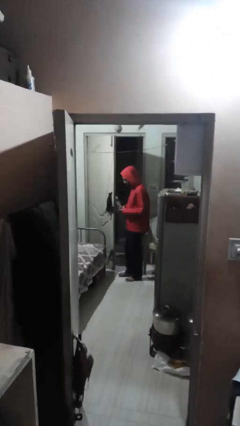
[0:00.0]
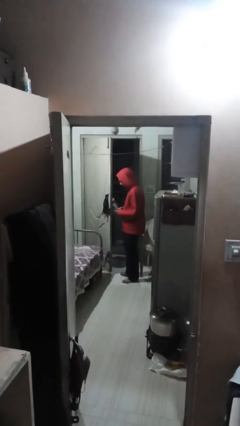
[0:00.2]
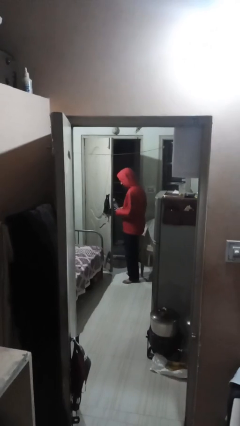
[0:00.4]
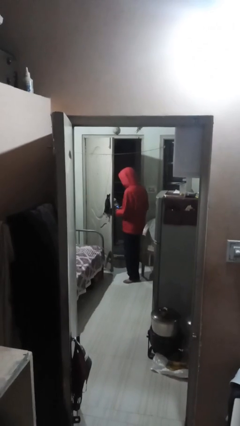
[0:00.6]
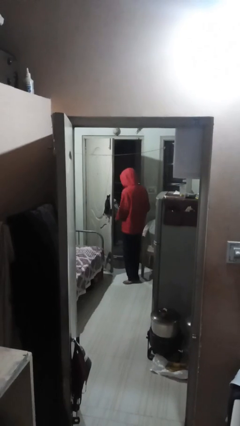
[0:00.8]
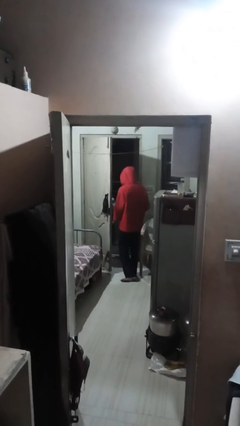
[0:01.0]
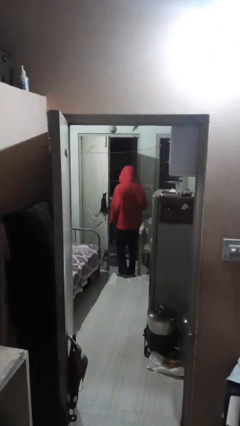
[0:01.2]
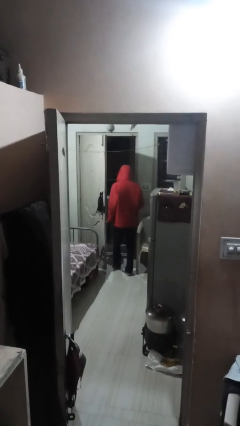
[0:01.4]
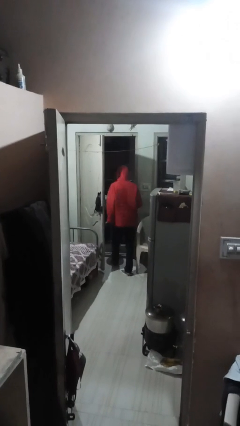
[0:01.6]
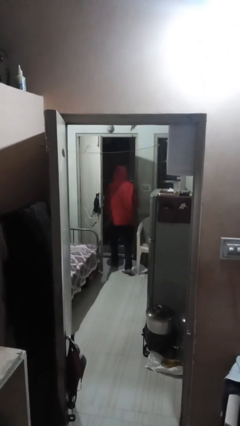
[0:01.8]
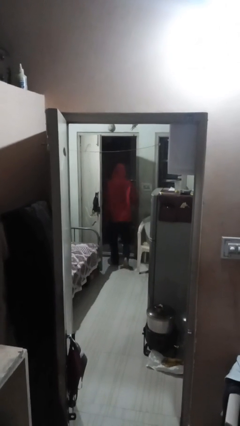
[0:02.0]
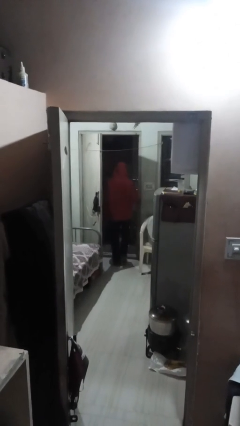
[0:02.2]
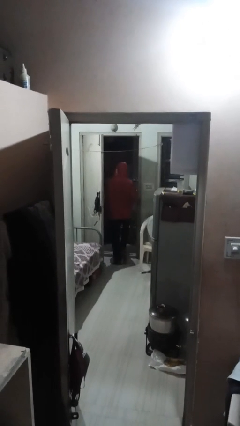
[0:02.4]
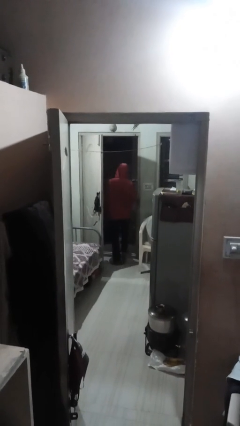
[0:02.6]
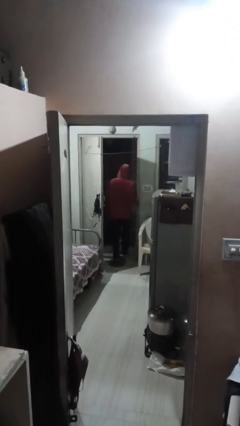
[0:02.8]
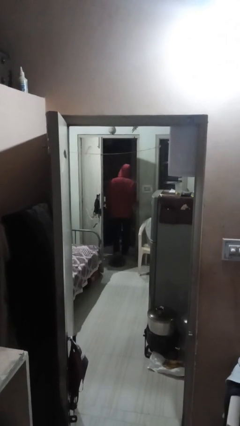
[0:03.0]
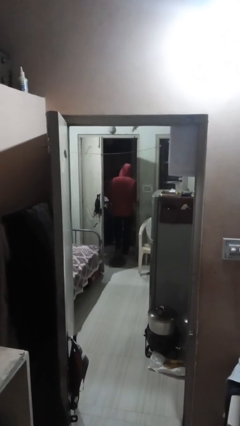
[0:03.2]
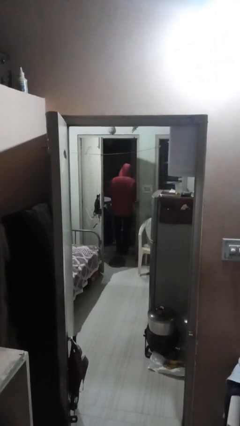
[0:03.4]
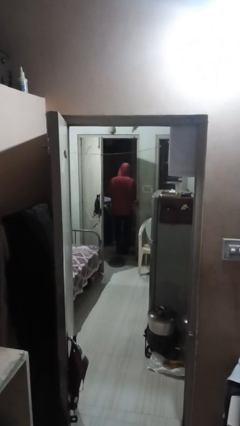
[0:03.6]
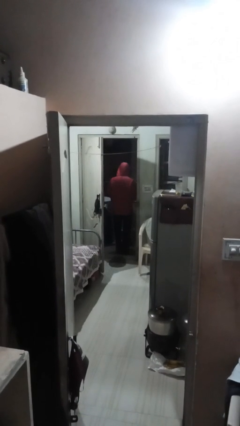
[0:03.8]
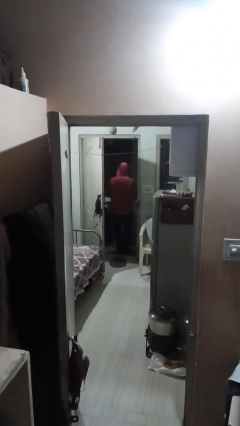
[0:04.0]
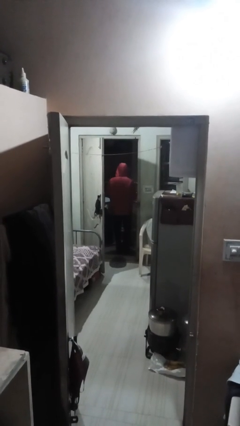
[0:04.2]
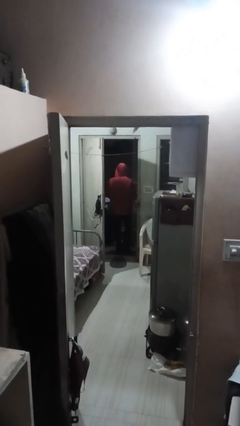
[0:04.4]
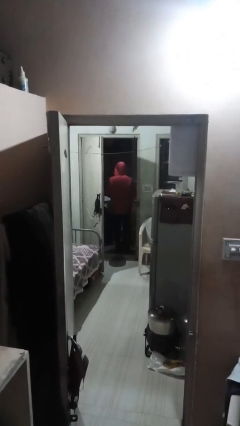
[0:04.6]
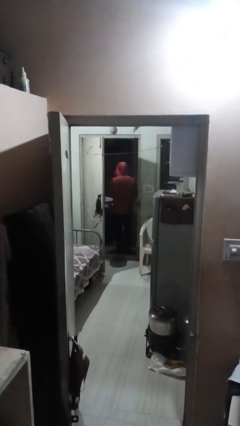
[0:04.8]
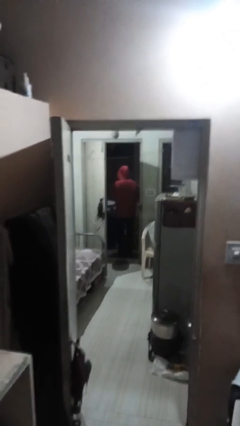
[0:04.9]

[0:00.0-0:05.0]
person exits scene through structure

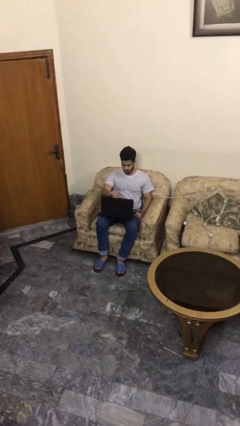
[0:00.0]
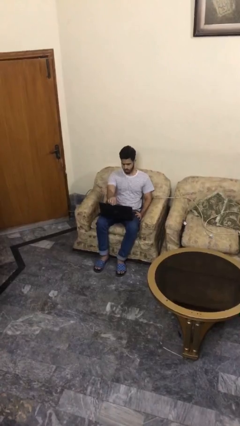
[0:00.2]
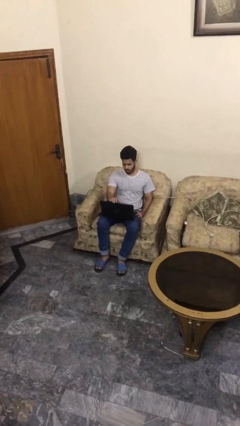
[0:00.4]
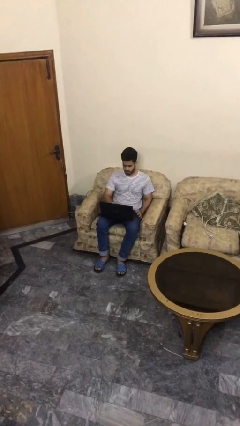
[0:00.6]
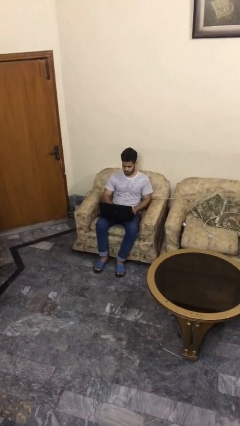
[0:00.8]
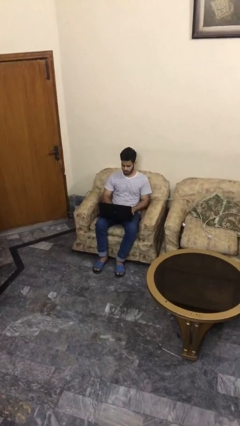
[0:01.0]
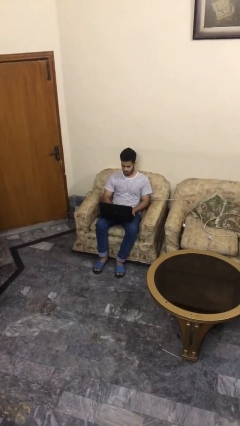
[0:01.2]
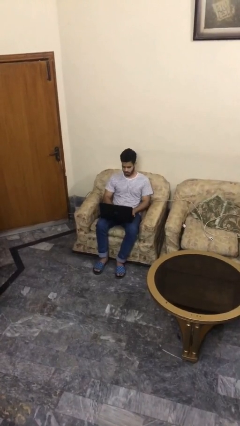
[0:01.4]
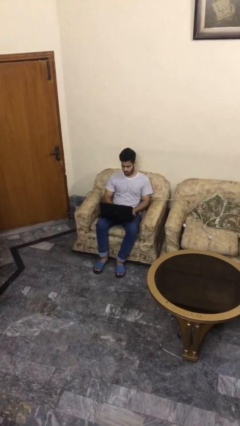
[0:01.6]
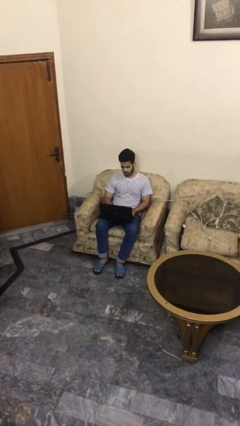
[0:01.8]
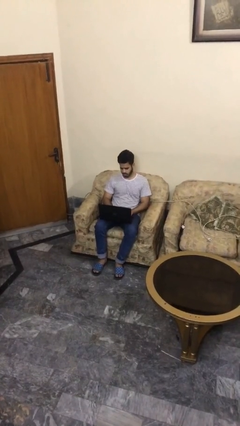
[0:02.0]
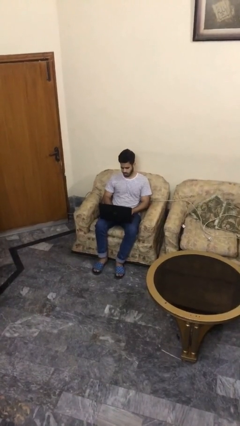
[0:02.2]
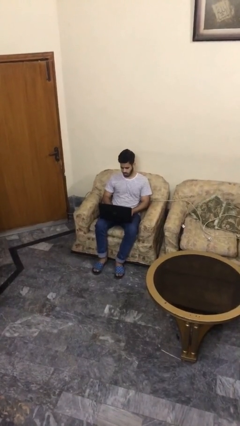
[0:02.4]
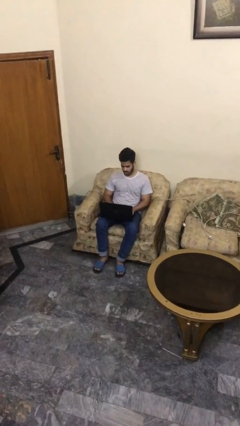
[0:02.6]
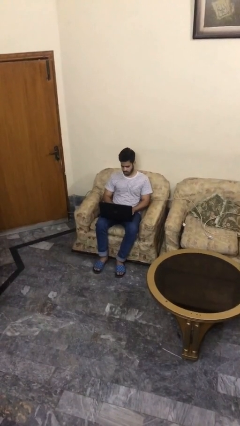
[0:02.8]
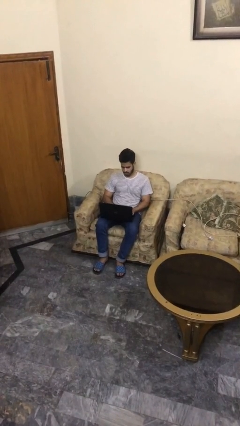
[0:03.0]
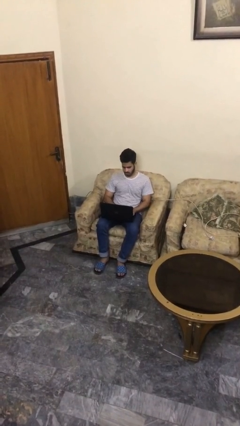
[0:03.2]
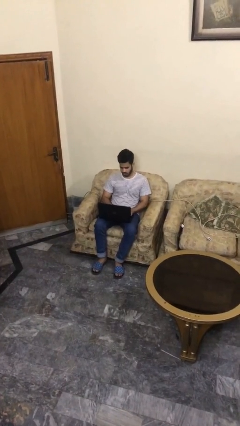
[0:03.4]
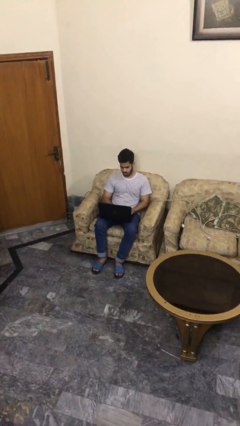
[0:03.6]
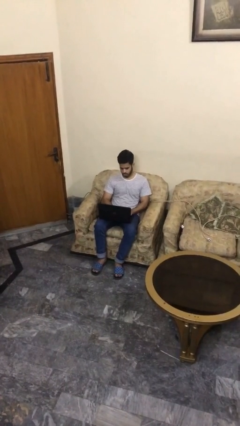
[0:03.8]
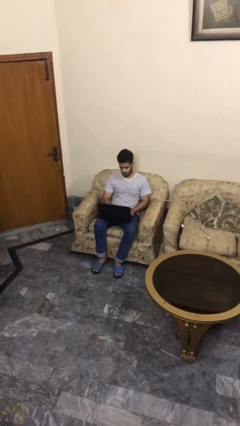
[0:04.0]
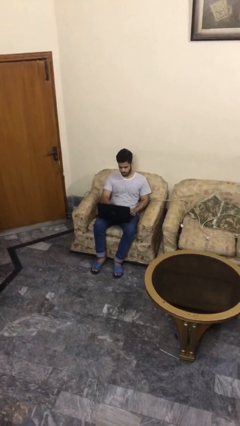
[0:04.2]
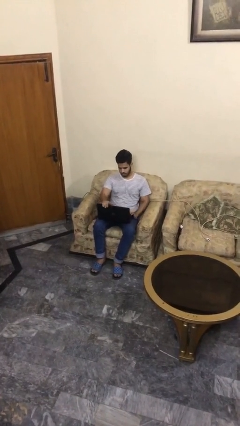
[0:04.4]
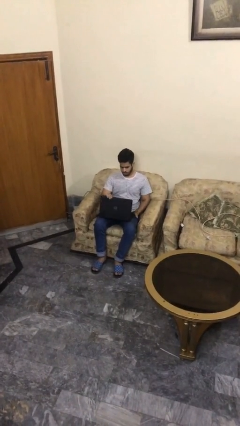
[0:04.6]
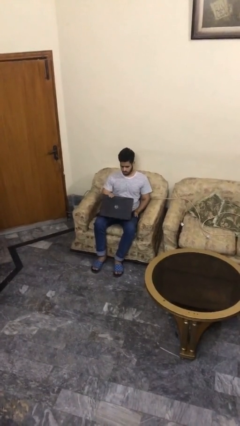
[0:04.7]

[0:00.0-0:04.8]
person interacts with laptop

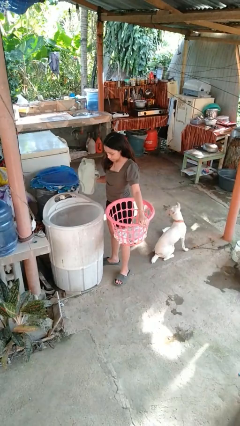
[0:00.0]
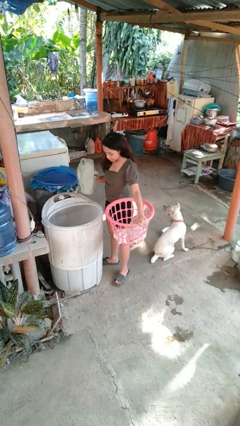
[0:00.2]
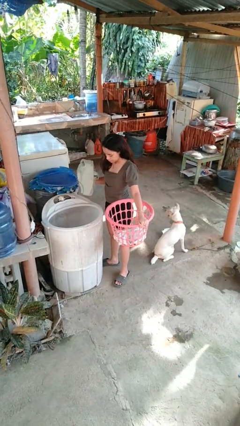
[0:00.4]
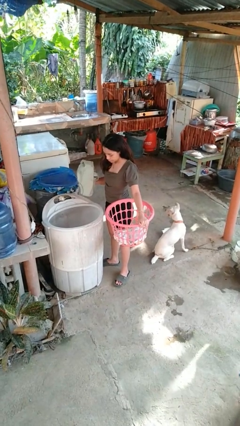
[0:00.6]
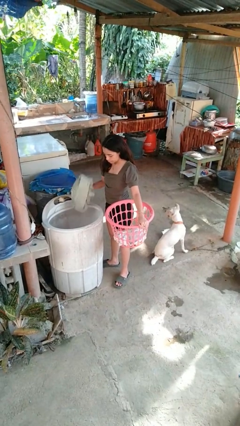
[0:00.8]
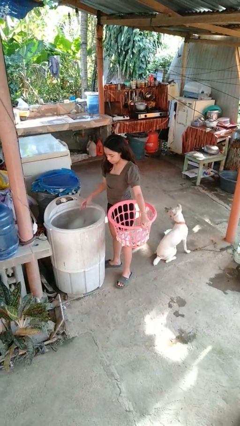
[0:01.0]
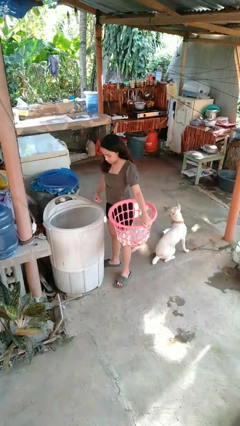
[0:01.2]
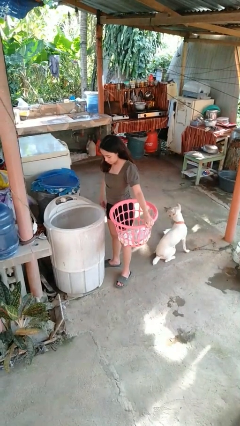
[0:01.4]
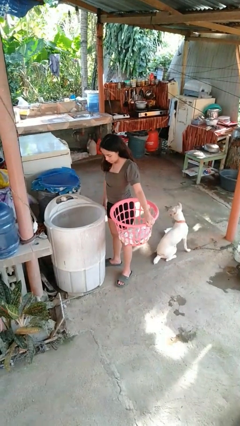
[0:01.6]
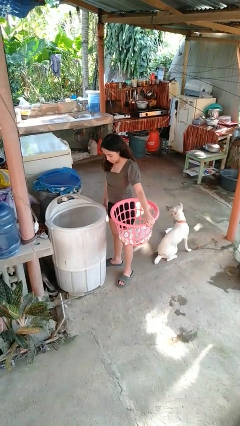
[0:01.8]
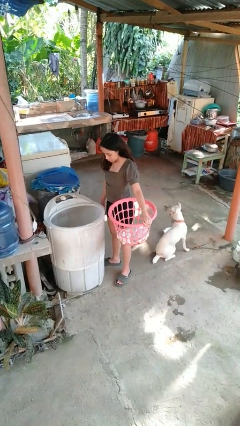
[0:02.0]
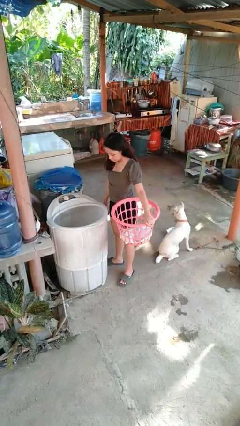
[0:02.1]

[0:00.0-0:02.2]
person loads dryer

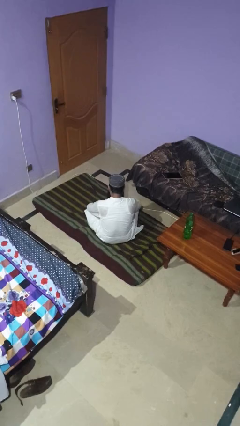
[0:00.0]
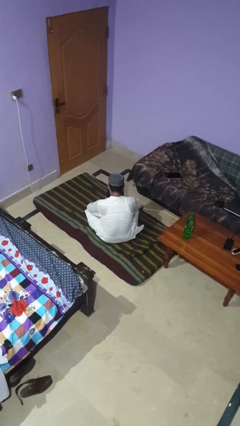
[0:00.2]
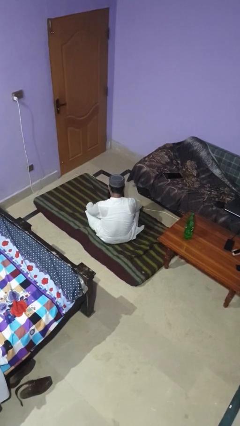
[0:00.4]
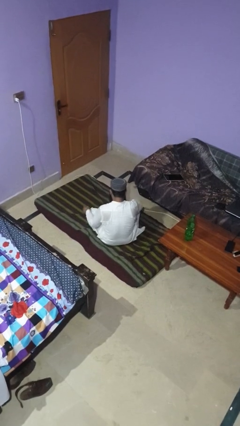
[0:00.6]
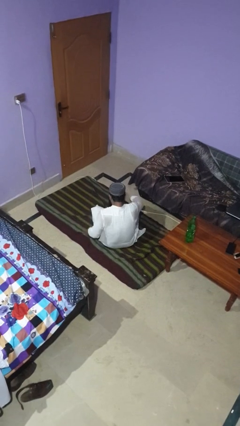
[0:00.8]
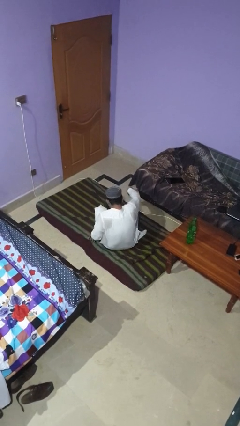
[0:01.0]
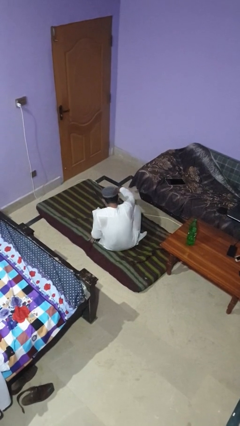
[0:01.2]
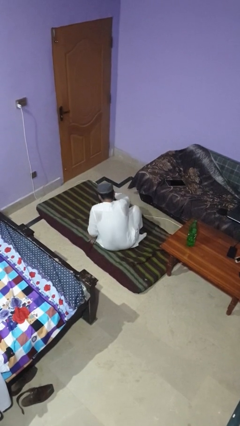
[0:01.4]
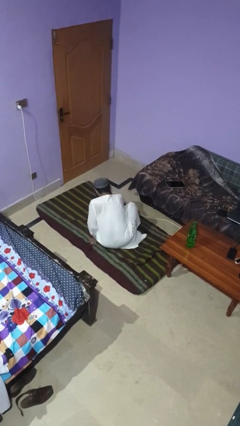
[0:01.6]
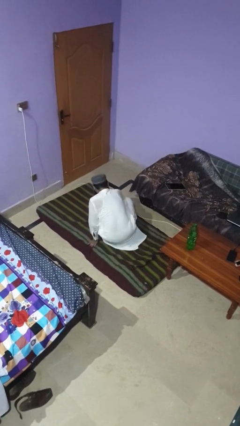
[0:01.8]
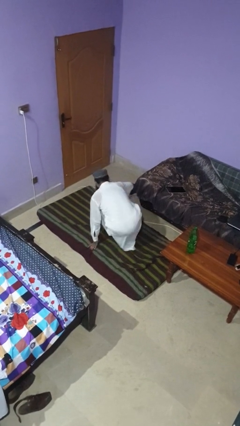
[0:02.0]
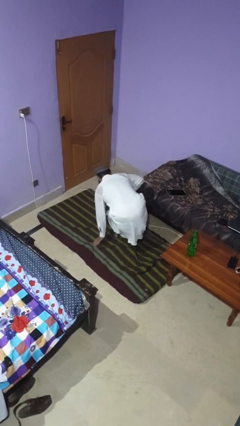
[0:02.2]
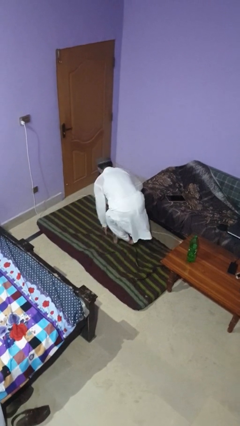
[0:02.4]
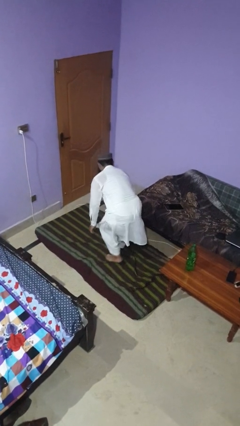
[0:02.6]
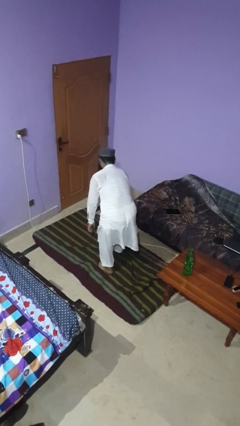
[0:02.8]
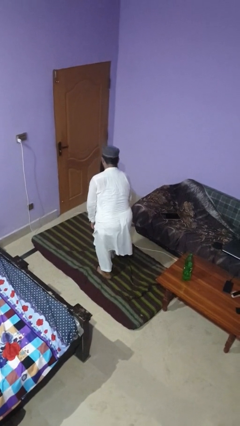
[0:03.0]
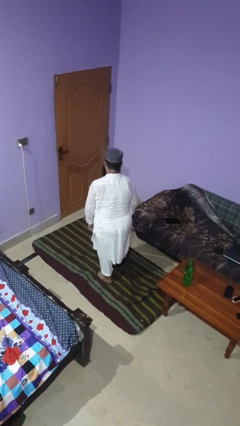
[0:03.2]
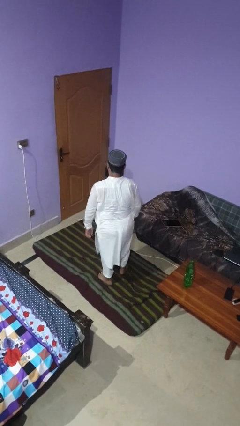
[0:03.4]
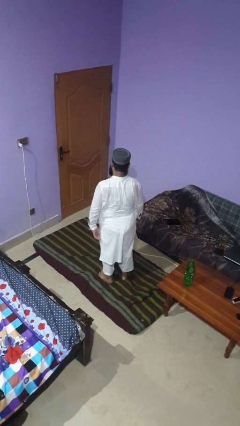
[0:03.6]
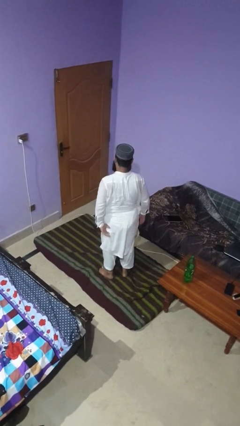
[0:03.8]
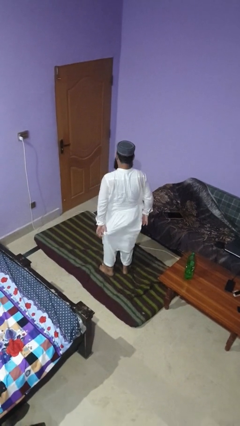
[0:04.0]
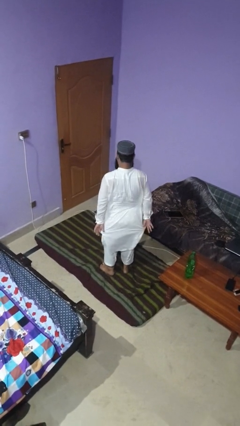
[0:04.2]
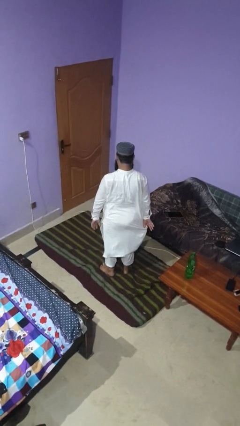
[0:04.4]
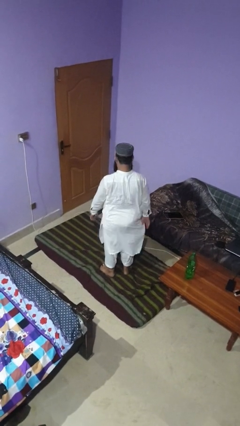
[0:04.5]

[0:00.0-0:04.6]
person stands up from floor

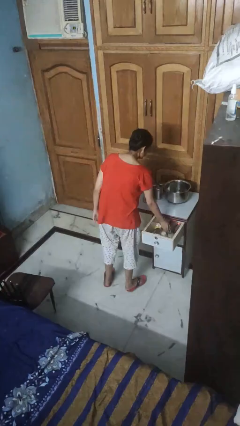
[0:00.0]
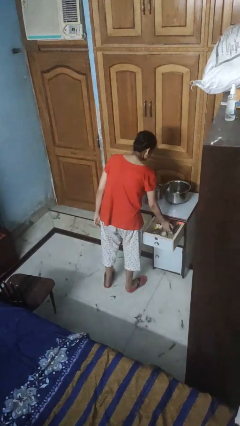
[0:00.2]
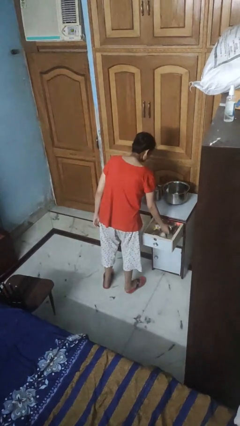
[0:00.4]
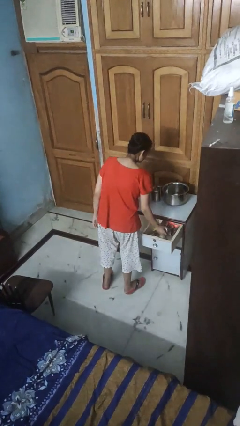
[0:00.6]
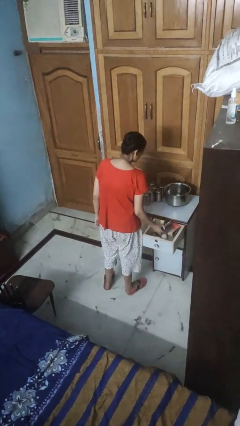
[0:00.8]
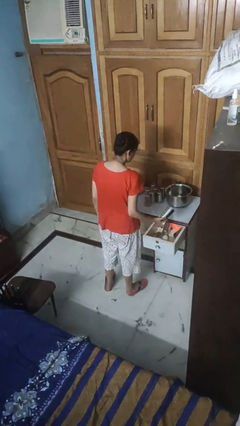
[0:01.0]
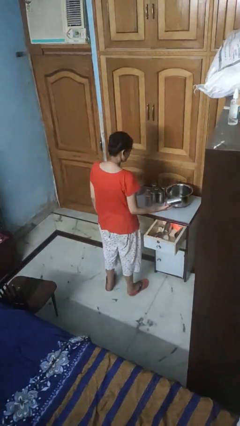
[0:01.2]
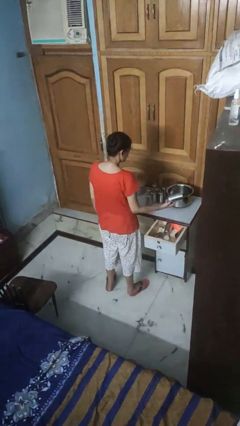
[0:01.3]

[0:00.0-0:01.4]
person takes object from kitchen drawer
